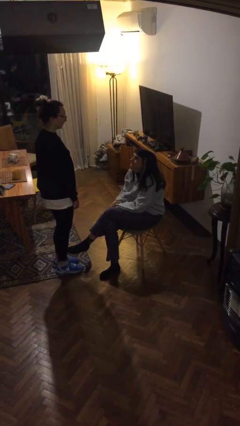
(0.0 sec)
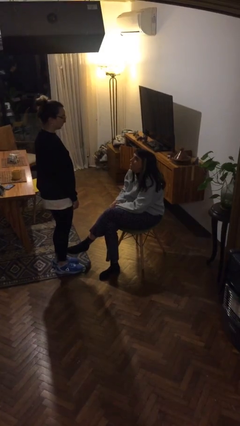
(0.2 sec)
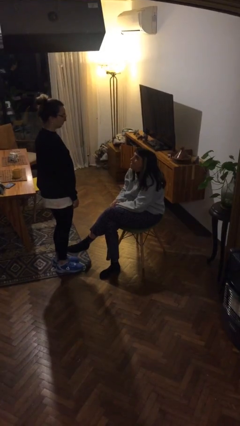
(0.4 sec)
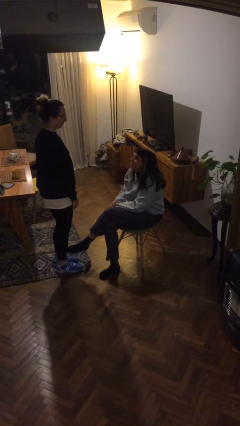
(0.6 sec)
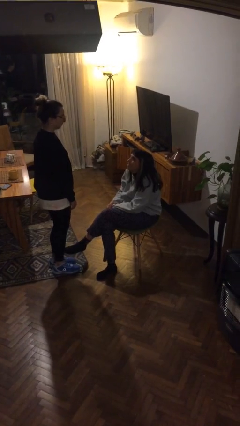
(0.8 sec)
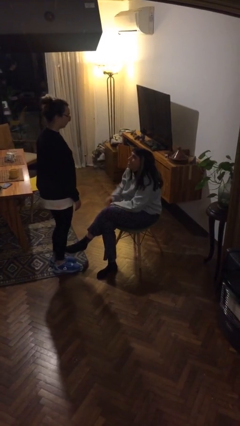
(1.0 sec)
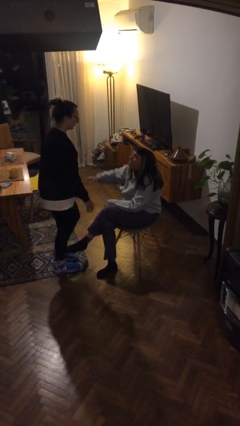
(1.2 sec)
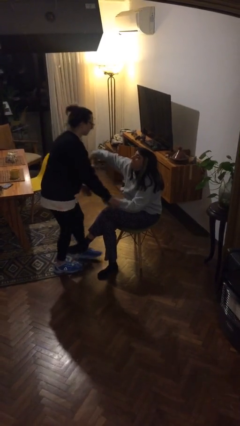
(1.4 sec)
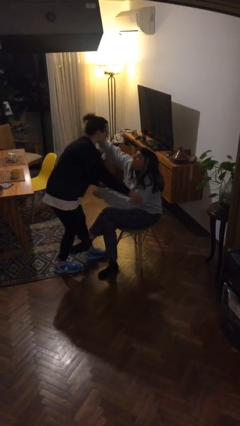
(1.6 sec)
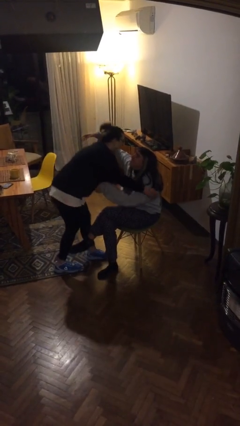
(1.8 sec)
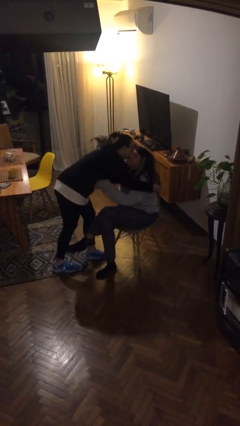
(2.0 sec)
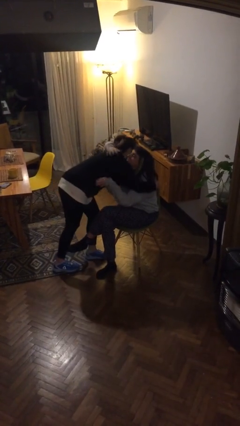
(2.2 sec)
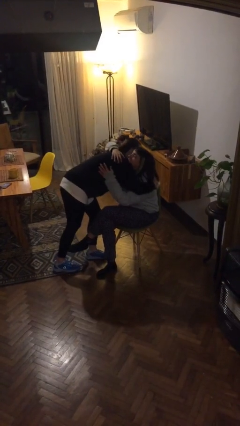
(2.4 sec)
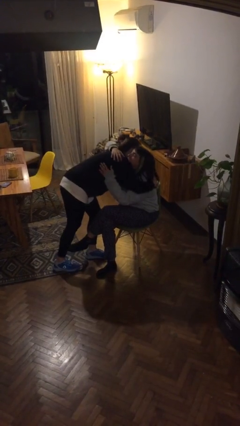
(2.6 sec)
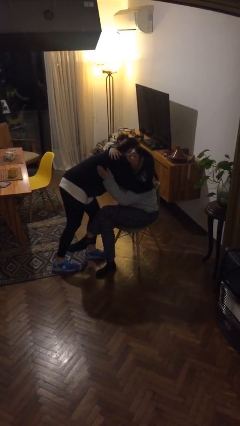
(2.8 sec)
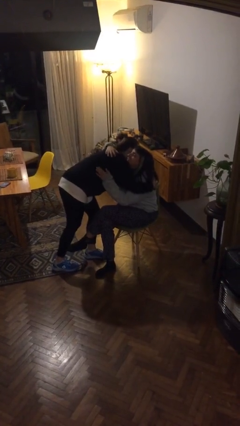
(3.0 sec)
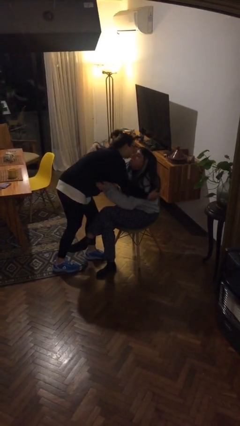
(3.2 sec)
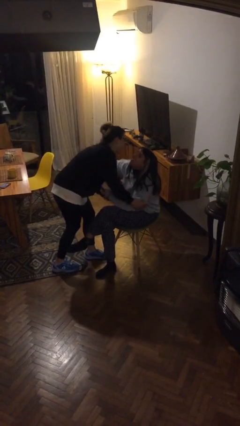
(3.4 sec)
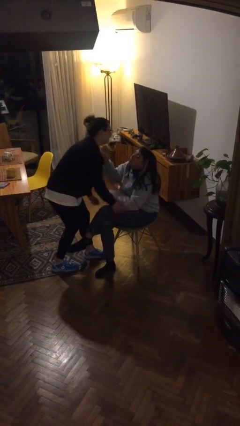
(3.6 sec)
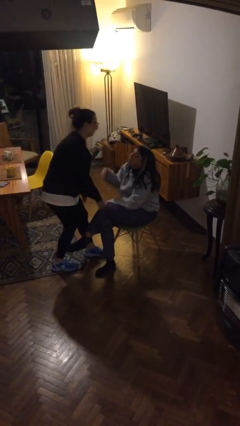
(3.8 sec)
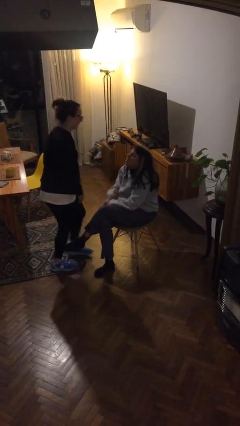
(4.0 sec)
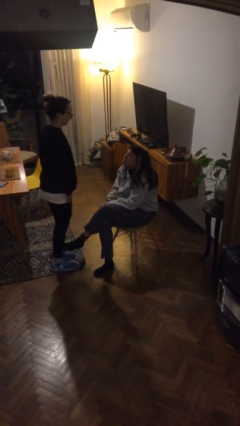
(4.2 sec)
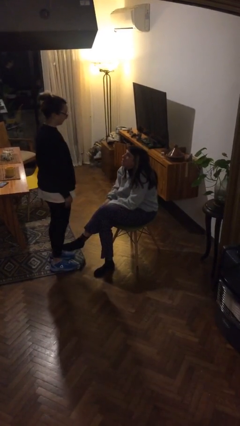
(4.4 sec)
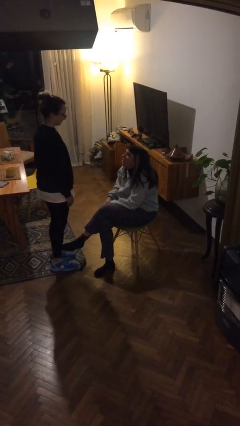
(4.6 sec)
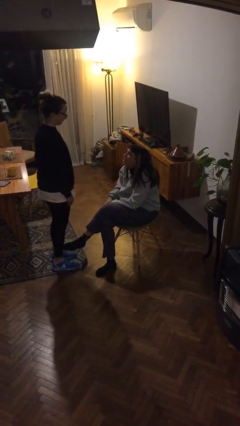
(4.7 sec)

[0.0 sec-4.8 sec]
person embraces person

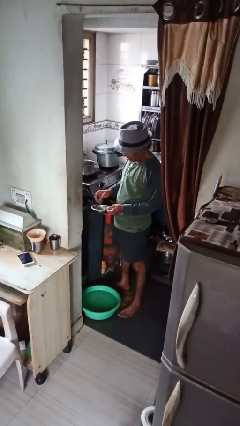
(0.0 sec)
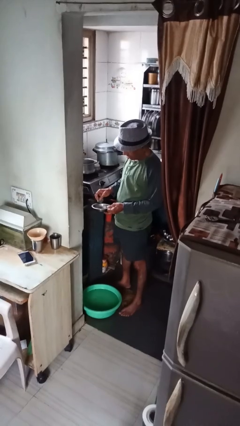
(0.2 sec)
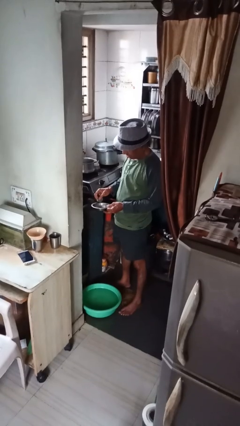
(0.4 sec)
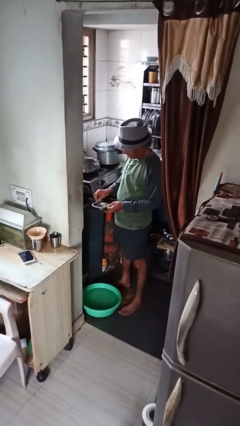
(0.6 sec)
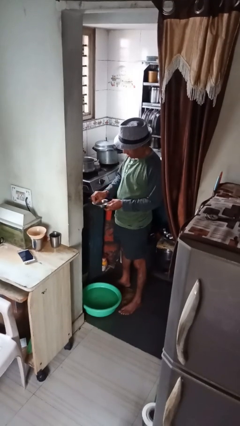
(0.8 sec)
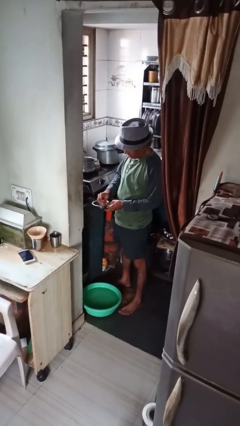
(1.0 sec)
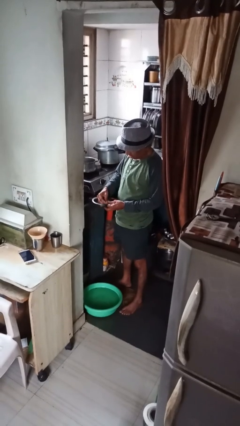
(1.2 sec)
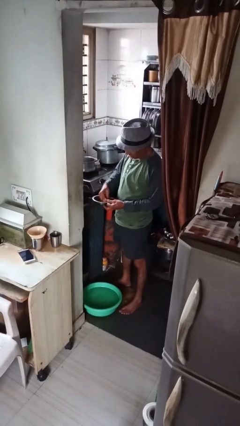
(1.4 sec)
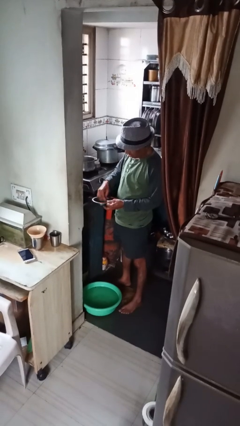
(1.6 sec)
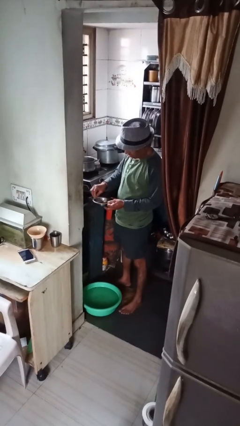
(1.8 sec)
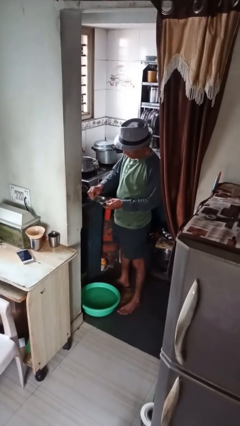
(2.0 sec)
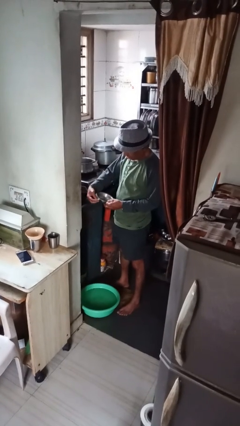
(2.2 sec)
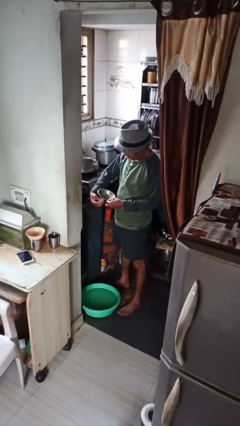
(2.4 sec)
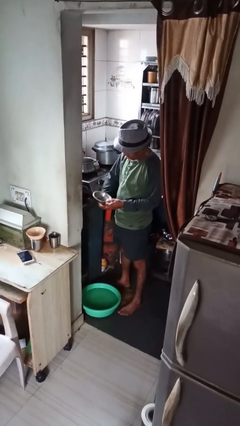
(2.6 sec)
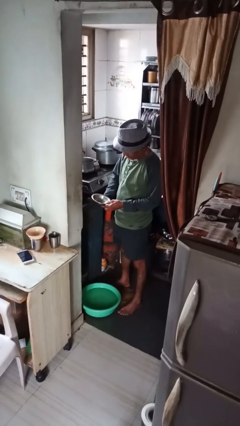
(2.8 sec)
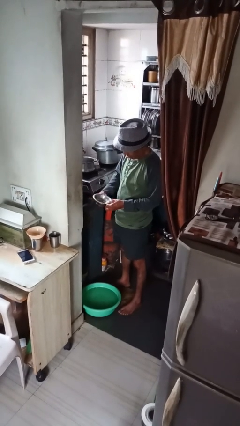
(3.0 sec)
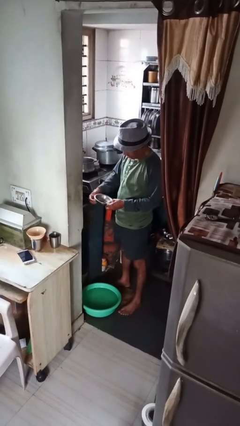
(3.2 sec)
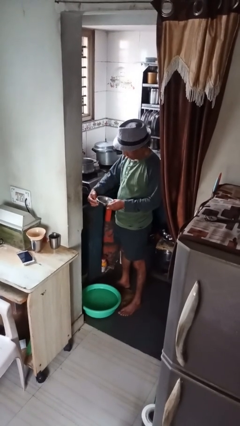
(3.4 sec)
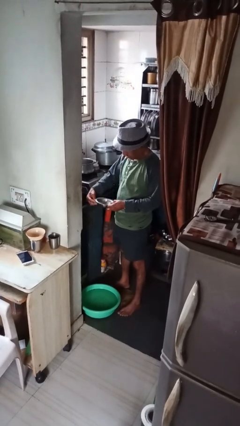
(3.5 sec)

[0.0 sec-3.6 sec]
person washes dish

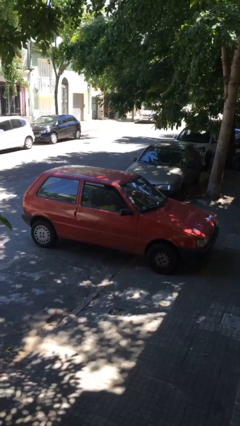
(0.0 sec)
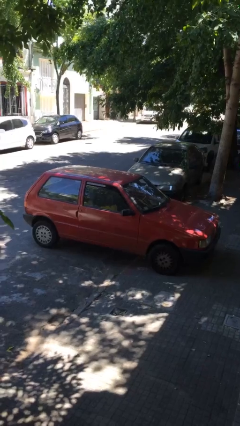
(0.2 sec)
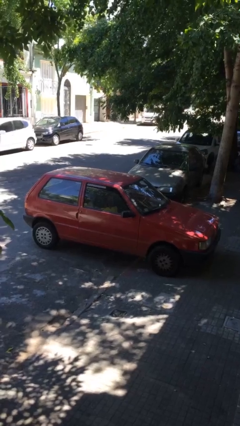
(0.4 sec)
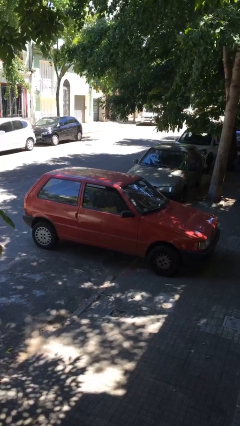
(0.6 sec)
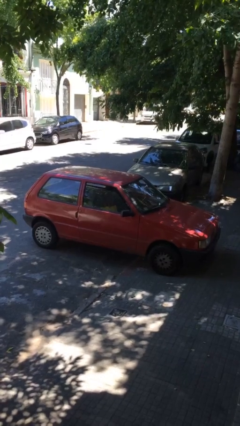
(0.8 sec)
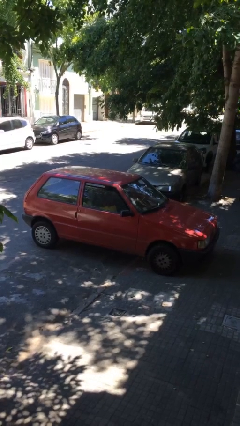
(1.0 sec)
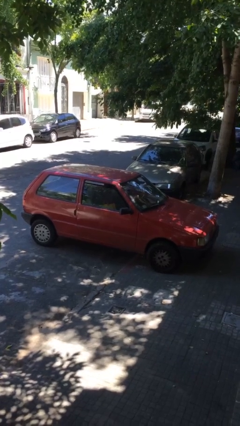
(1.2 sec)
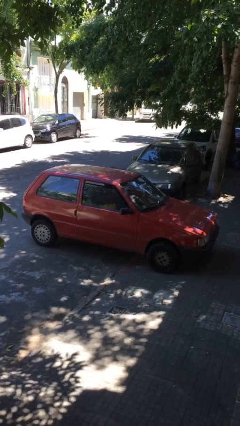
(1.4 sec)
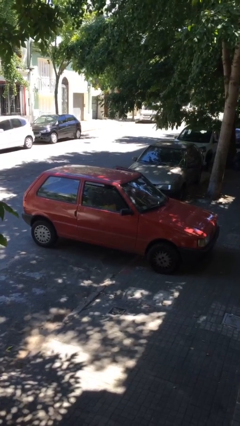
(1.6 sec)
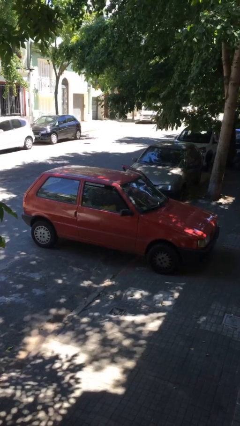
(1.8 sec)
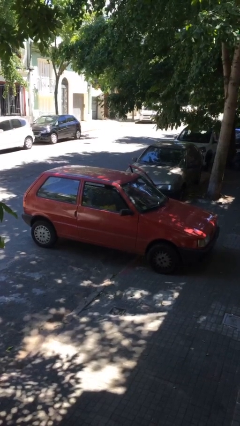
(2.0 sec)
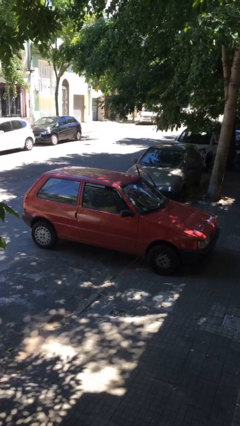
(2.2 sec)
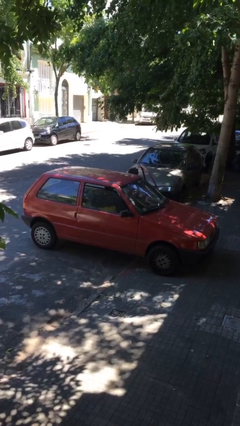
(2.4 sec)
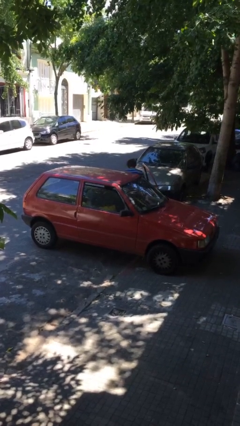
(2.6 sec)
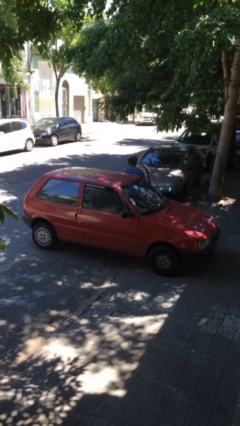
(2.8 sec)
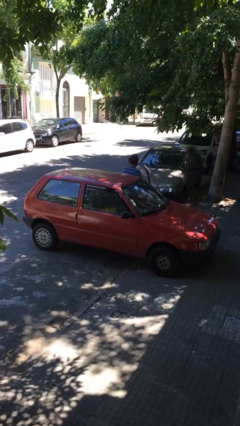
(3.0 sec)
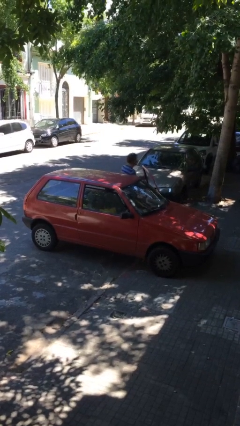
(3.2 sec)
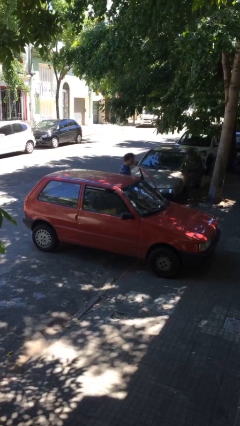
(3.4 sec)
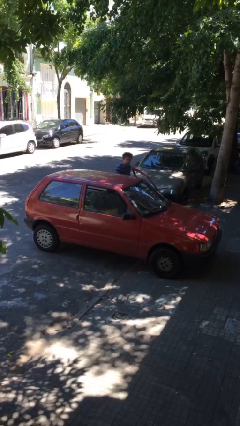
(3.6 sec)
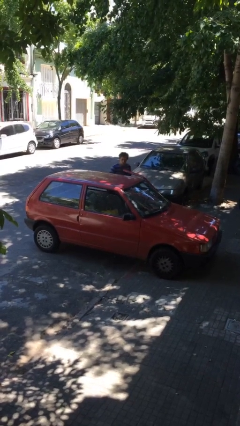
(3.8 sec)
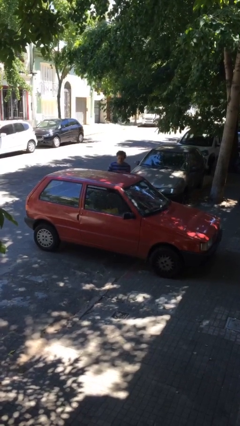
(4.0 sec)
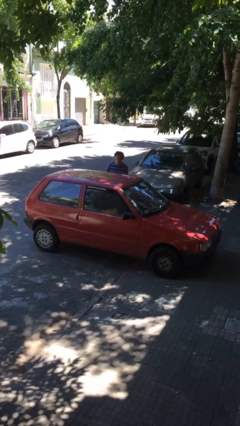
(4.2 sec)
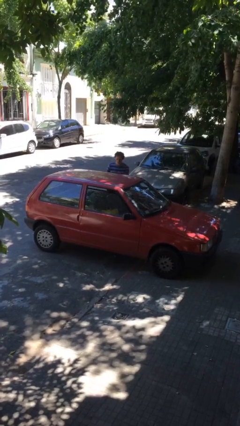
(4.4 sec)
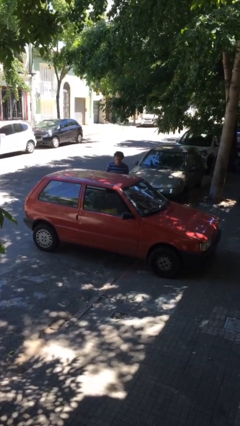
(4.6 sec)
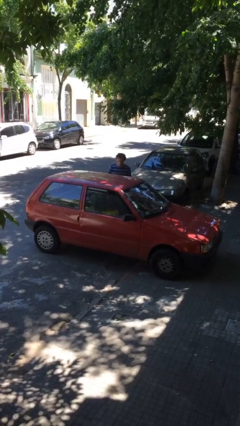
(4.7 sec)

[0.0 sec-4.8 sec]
car drops off person

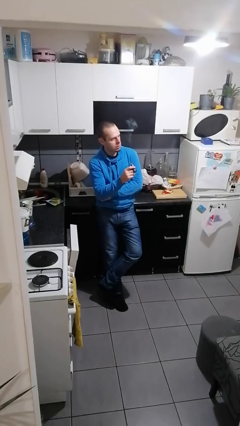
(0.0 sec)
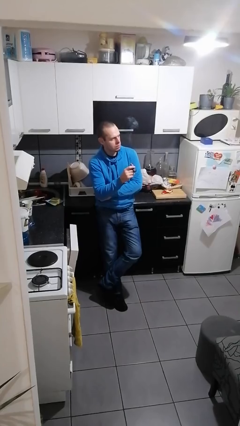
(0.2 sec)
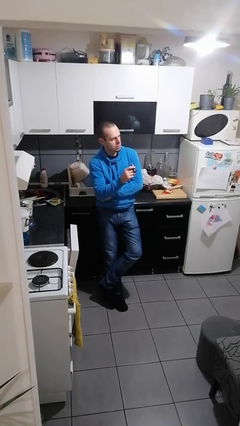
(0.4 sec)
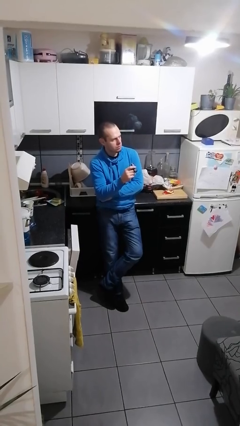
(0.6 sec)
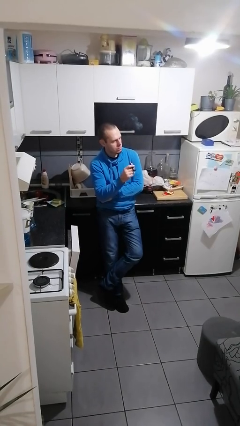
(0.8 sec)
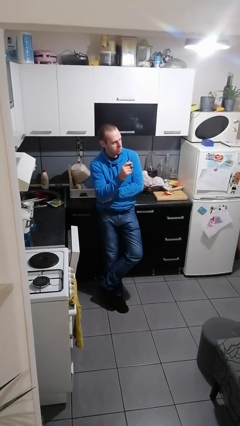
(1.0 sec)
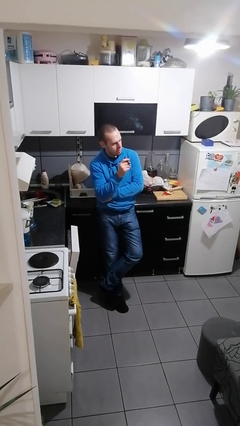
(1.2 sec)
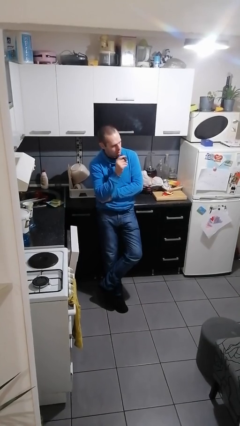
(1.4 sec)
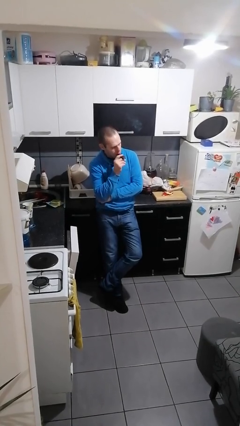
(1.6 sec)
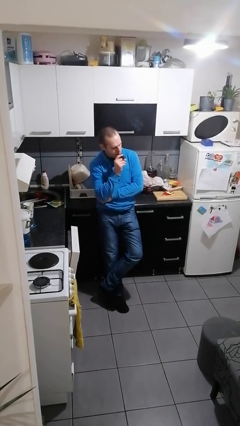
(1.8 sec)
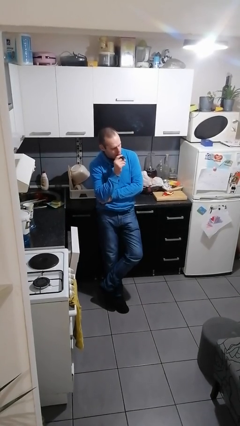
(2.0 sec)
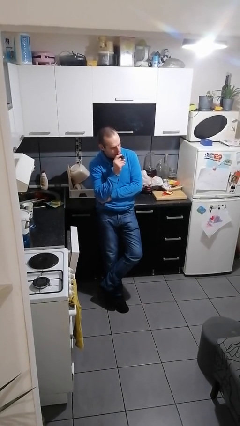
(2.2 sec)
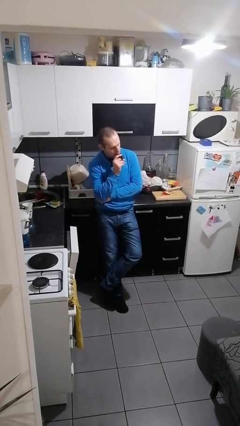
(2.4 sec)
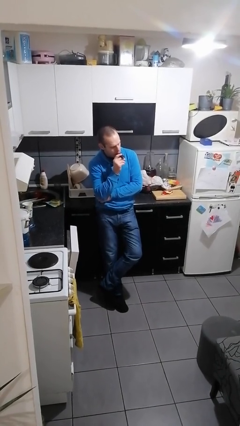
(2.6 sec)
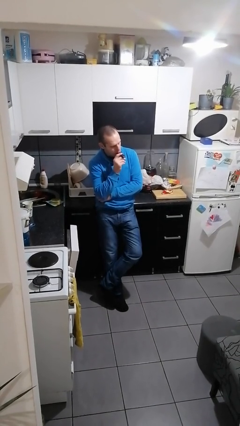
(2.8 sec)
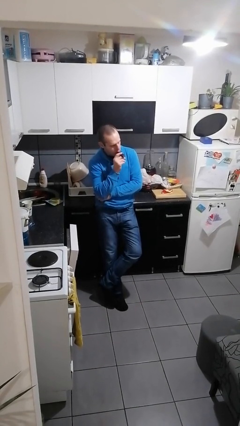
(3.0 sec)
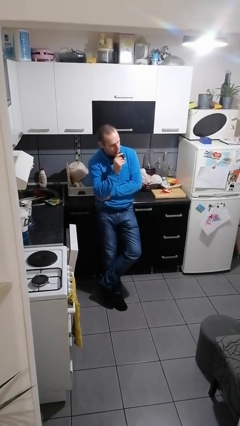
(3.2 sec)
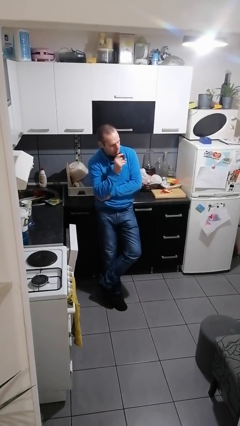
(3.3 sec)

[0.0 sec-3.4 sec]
person vapes

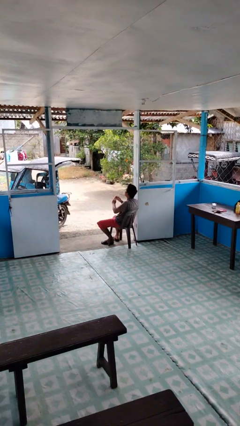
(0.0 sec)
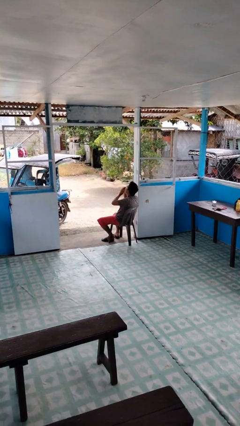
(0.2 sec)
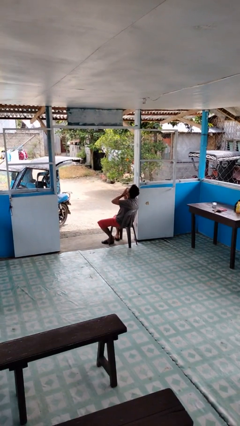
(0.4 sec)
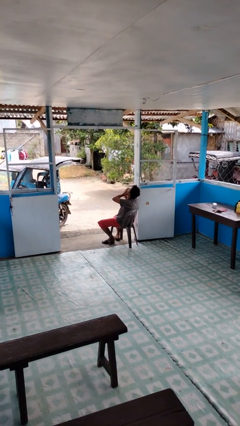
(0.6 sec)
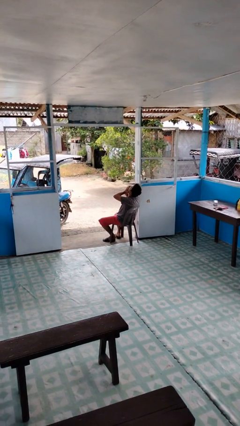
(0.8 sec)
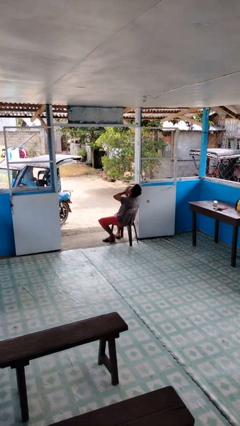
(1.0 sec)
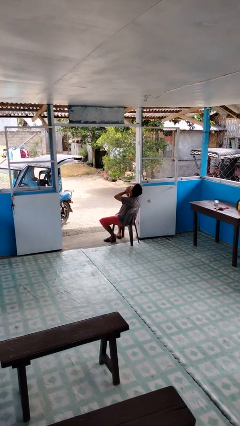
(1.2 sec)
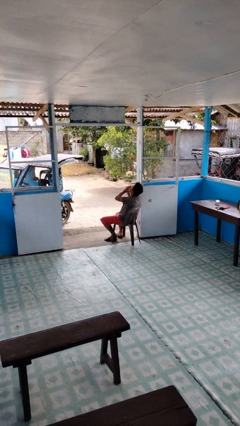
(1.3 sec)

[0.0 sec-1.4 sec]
person yawns
